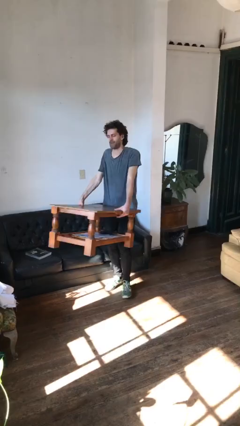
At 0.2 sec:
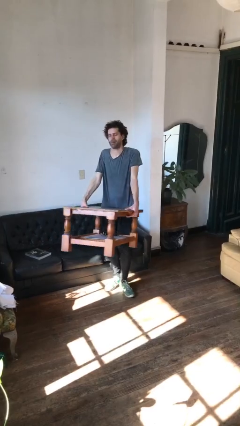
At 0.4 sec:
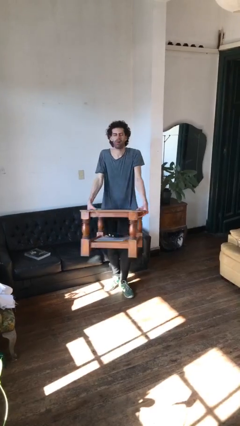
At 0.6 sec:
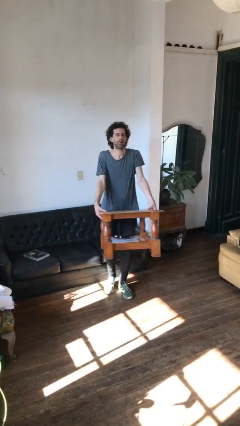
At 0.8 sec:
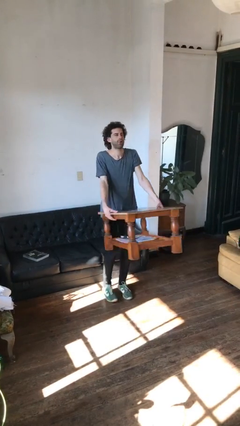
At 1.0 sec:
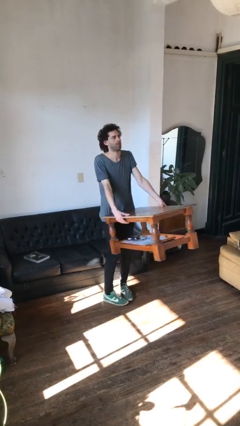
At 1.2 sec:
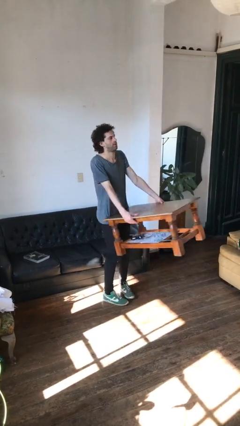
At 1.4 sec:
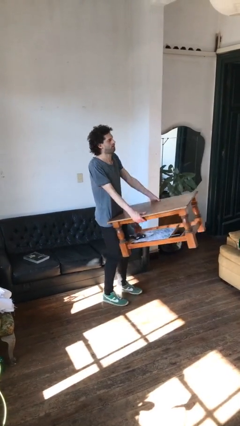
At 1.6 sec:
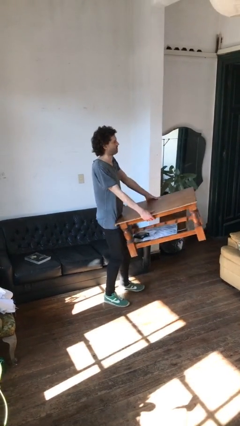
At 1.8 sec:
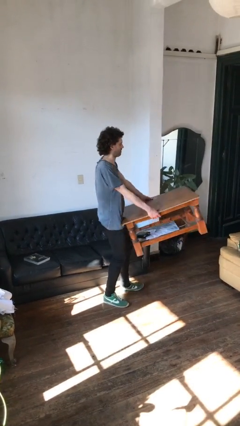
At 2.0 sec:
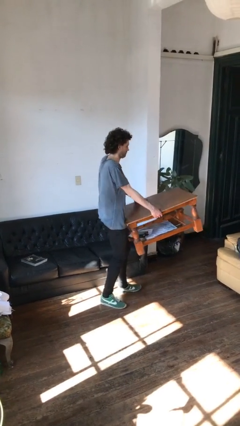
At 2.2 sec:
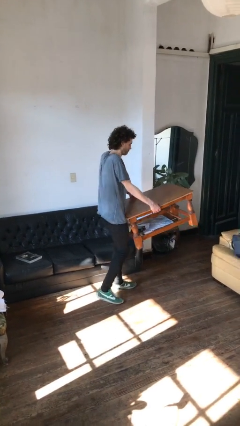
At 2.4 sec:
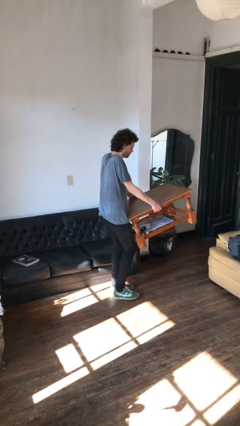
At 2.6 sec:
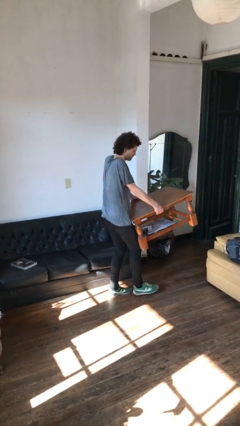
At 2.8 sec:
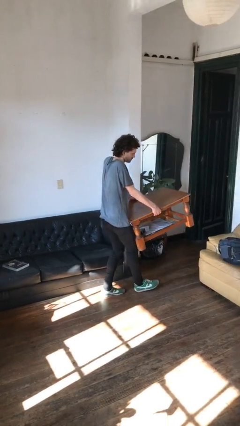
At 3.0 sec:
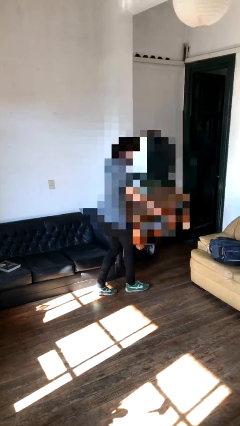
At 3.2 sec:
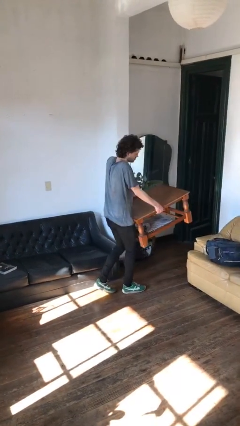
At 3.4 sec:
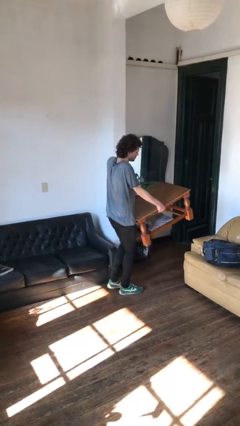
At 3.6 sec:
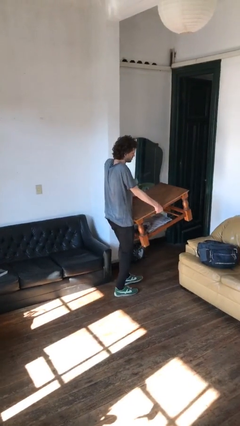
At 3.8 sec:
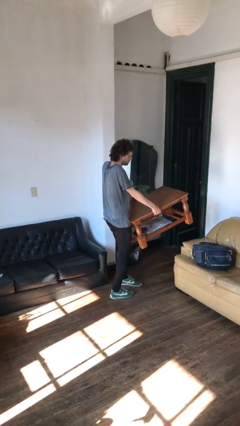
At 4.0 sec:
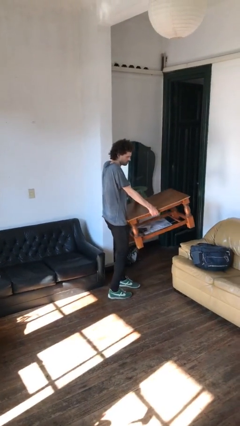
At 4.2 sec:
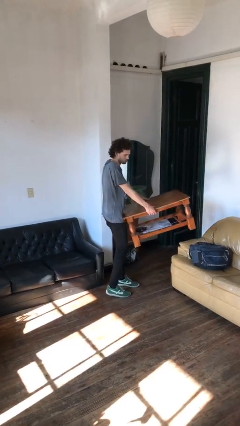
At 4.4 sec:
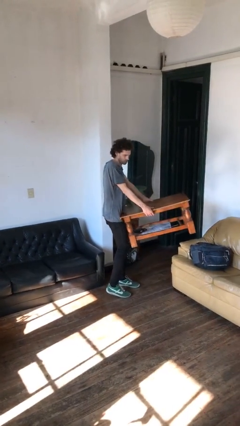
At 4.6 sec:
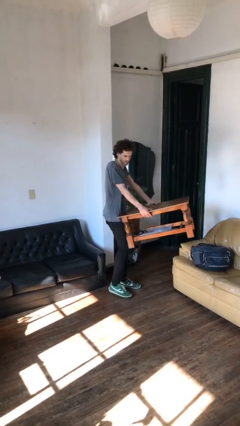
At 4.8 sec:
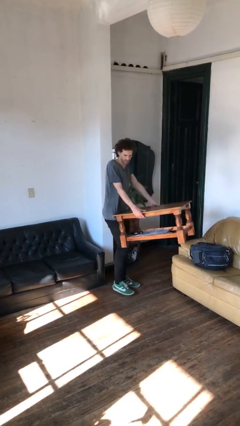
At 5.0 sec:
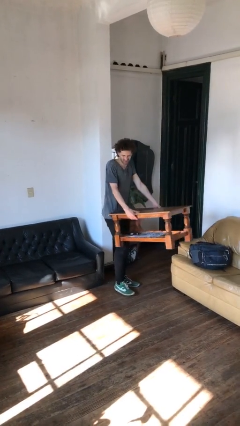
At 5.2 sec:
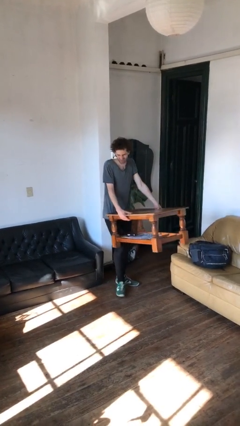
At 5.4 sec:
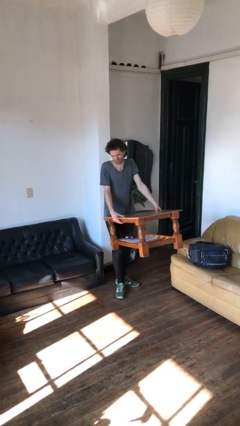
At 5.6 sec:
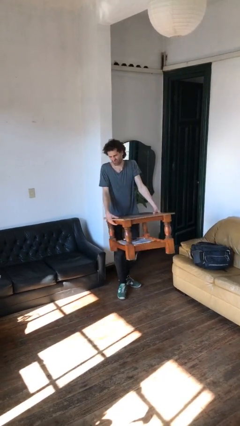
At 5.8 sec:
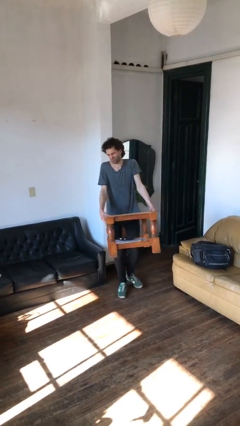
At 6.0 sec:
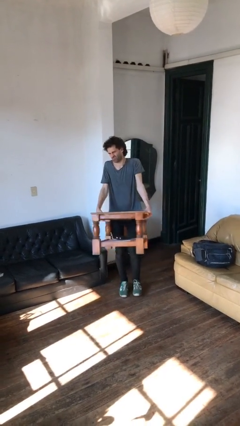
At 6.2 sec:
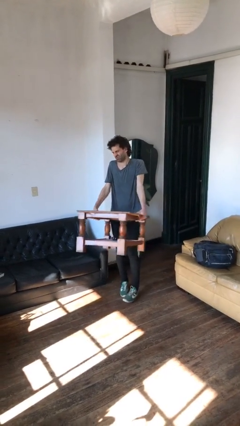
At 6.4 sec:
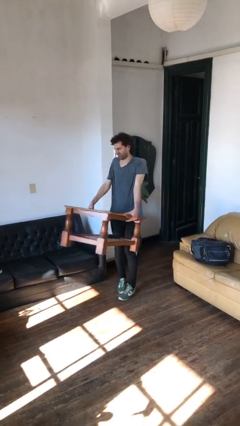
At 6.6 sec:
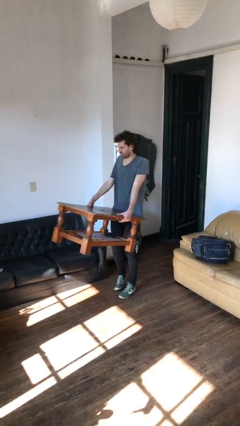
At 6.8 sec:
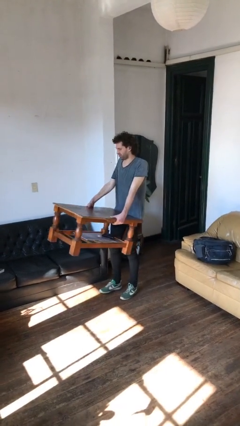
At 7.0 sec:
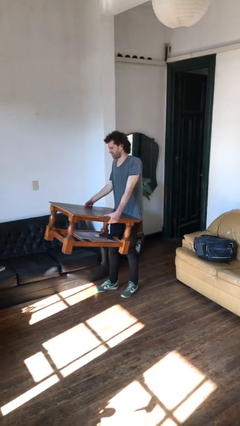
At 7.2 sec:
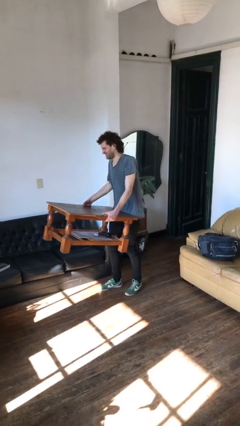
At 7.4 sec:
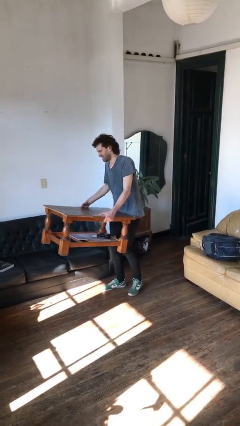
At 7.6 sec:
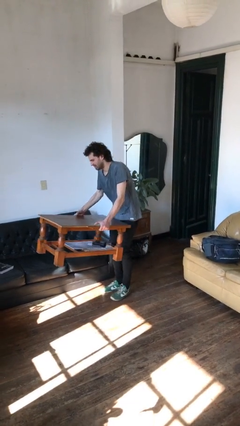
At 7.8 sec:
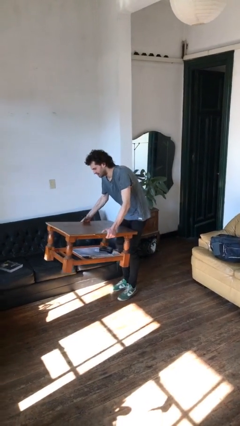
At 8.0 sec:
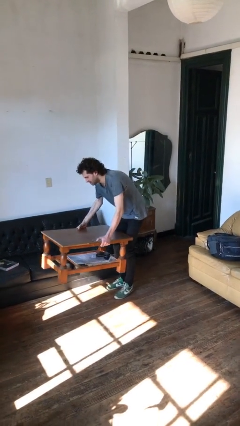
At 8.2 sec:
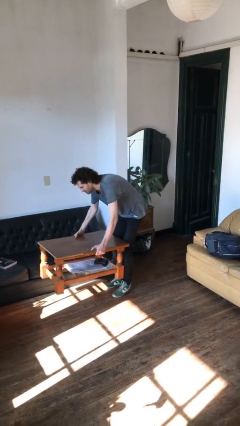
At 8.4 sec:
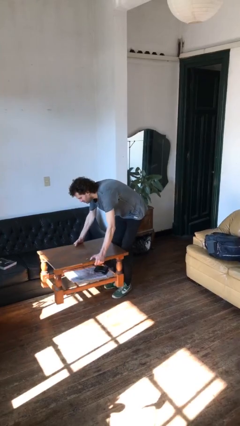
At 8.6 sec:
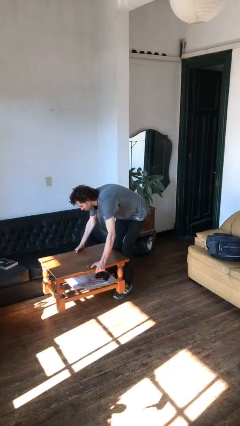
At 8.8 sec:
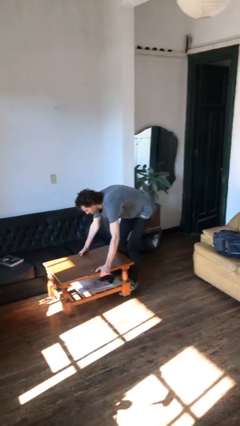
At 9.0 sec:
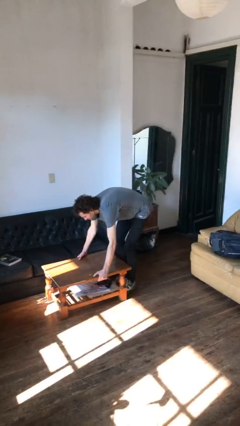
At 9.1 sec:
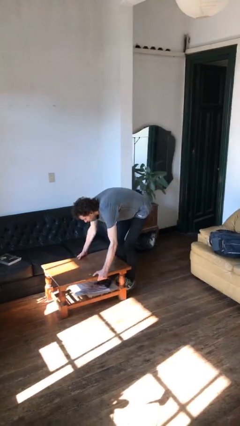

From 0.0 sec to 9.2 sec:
person carries heavy object

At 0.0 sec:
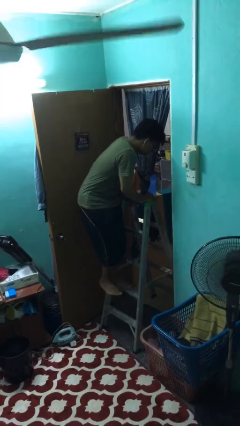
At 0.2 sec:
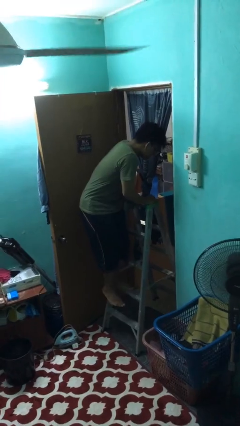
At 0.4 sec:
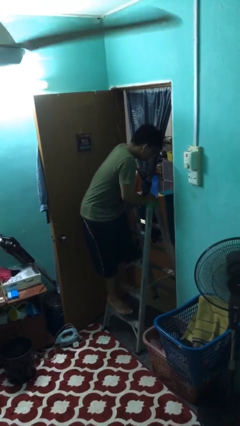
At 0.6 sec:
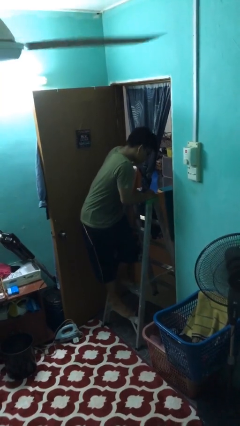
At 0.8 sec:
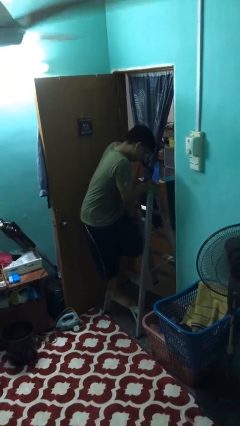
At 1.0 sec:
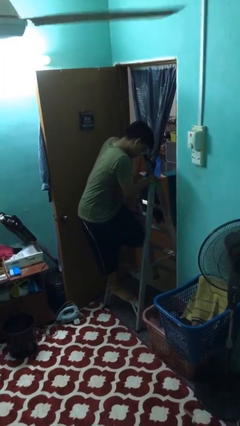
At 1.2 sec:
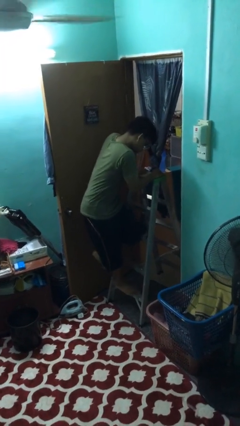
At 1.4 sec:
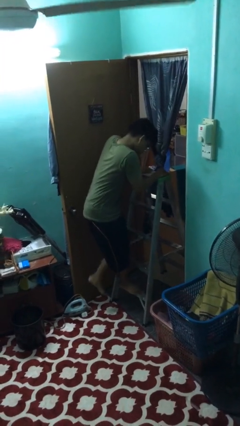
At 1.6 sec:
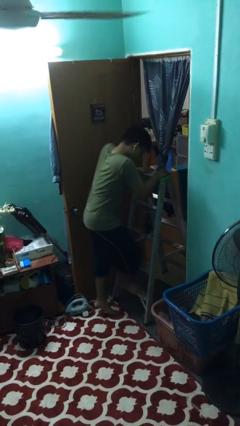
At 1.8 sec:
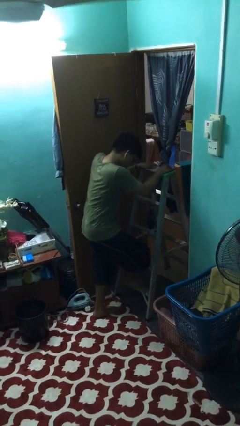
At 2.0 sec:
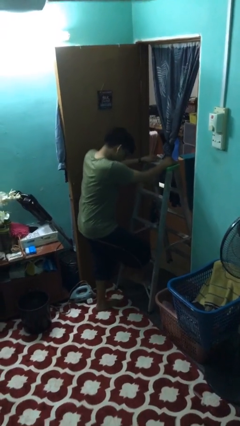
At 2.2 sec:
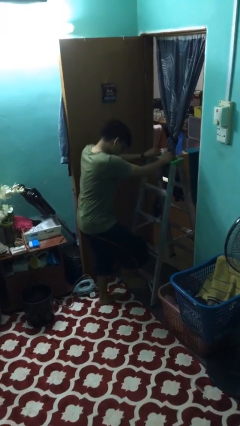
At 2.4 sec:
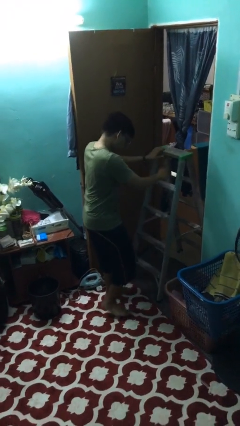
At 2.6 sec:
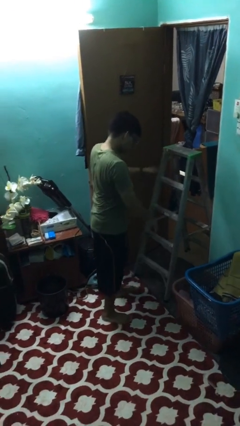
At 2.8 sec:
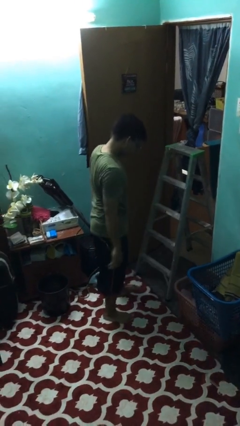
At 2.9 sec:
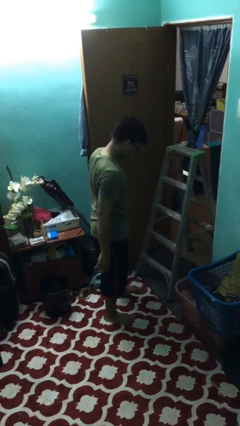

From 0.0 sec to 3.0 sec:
person climbs down ladder

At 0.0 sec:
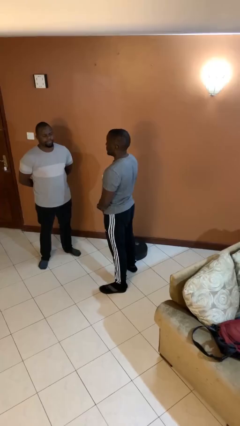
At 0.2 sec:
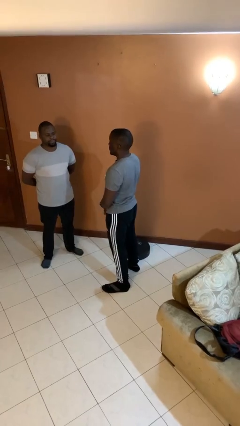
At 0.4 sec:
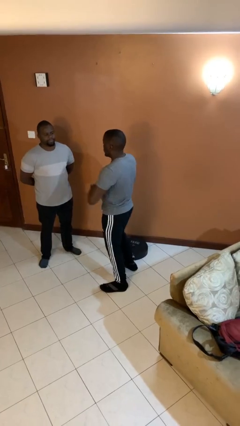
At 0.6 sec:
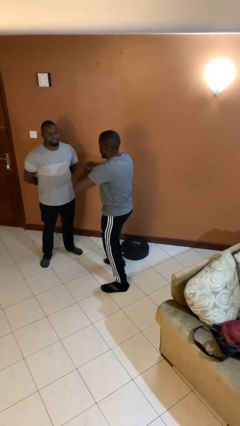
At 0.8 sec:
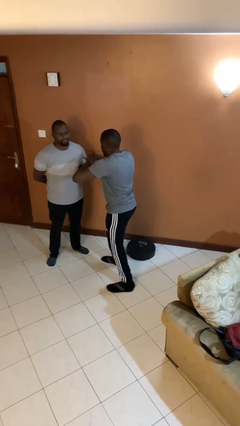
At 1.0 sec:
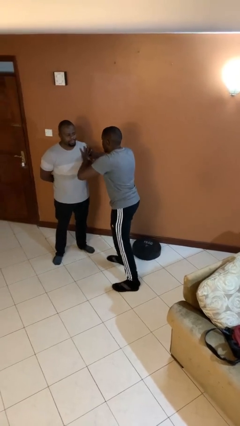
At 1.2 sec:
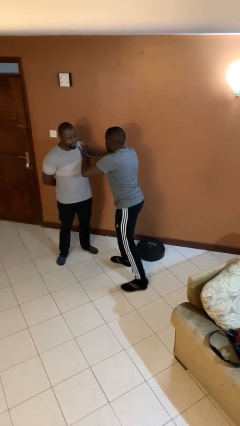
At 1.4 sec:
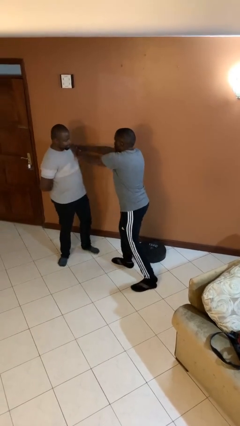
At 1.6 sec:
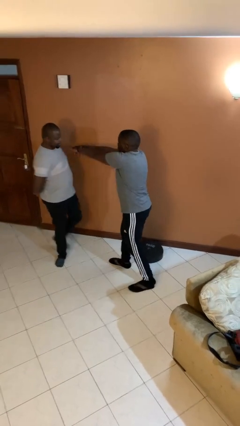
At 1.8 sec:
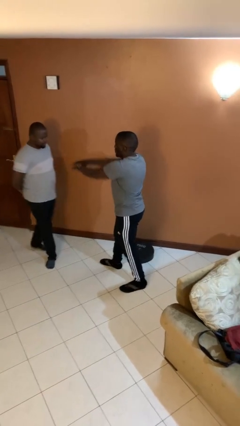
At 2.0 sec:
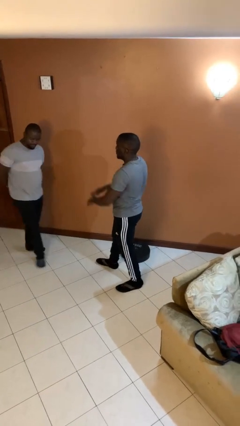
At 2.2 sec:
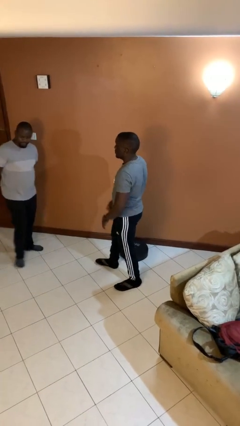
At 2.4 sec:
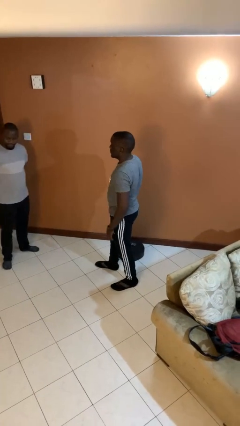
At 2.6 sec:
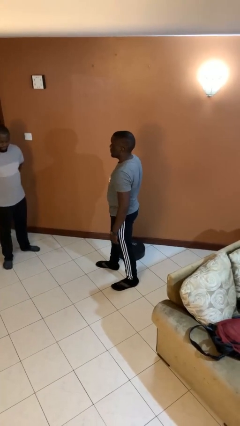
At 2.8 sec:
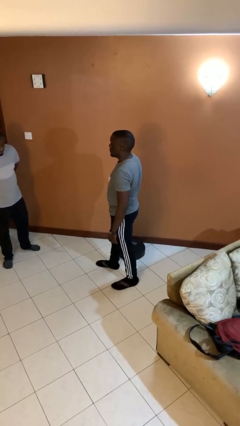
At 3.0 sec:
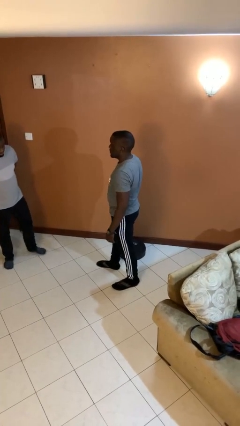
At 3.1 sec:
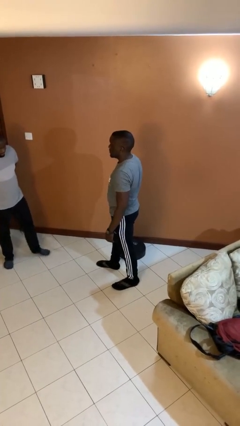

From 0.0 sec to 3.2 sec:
person shoves person

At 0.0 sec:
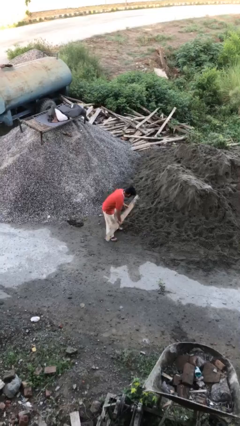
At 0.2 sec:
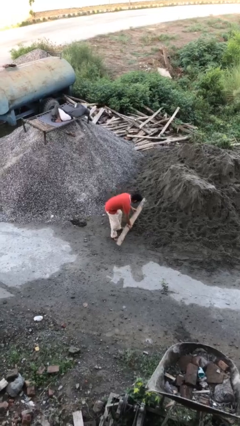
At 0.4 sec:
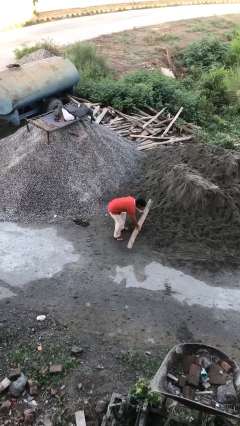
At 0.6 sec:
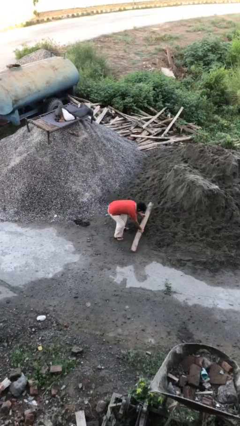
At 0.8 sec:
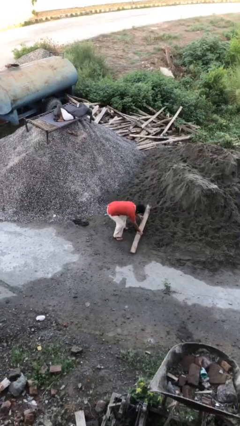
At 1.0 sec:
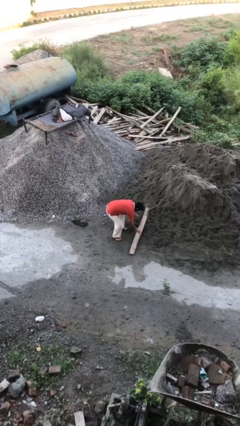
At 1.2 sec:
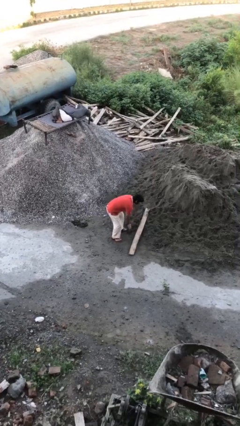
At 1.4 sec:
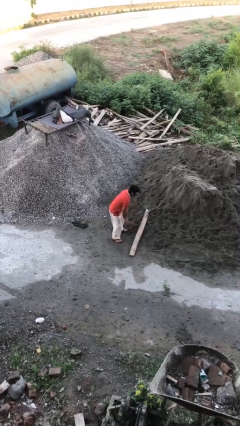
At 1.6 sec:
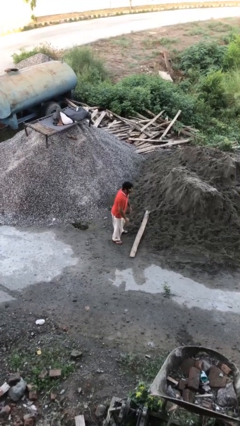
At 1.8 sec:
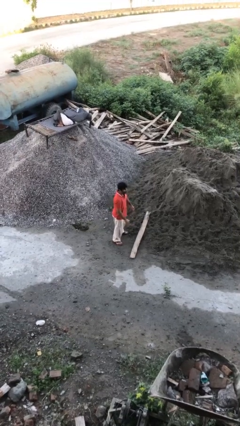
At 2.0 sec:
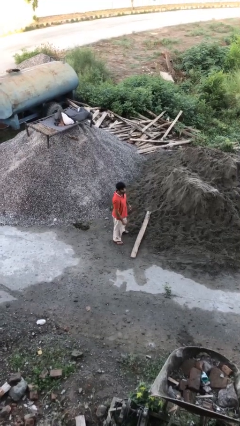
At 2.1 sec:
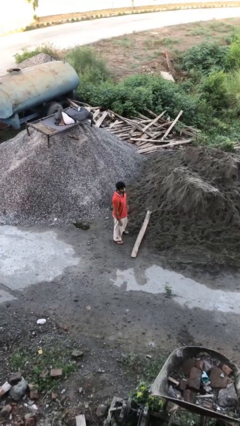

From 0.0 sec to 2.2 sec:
person puts down object on floor
